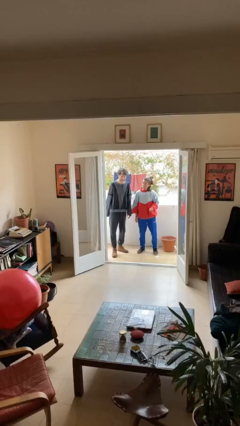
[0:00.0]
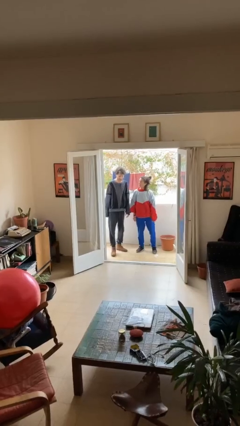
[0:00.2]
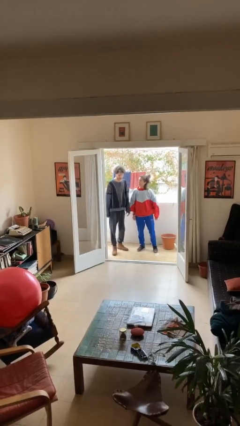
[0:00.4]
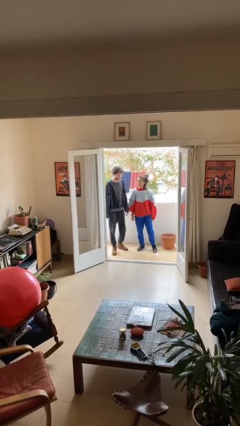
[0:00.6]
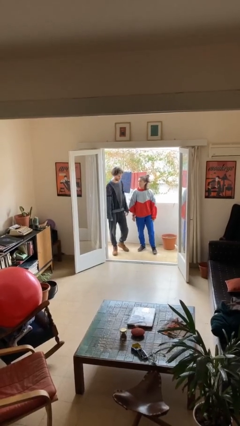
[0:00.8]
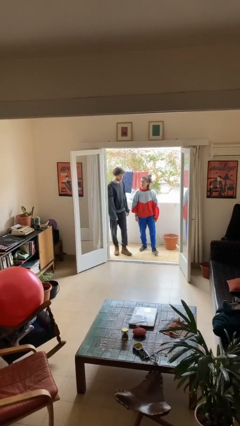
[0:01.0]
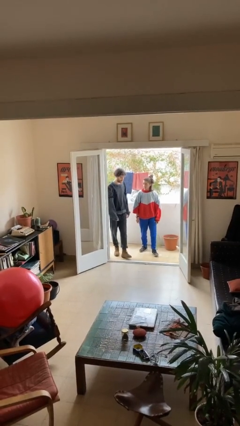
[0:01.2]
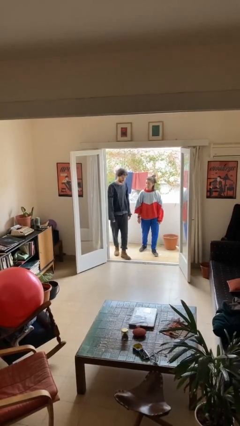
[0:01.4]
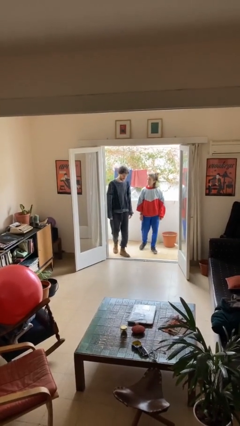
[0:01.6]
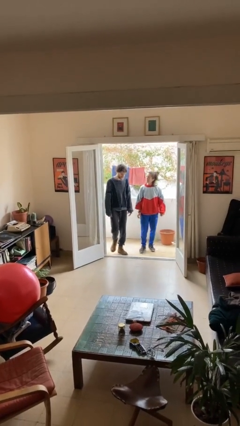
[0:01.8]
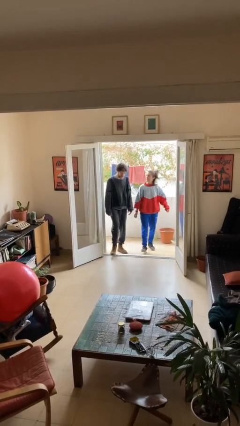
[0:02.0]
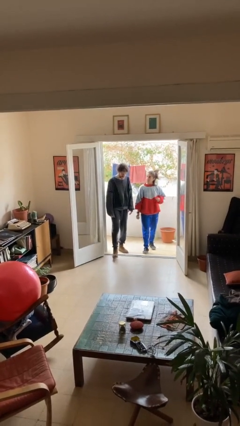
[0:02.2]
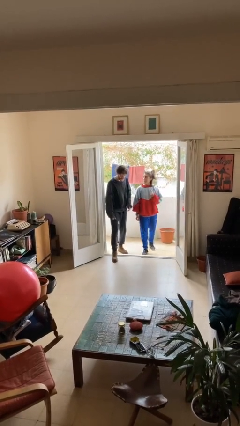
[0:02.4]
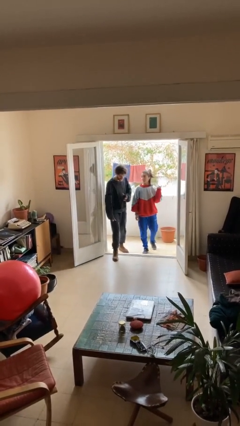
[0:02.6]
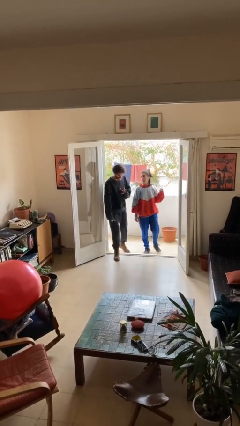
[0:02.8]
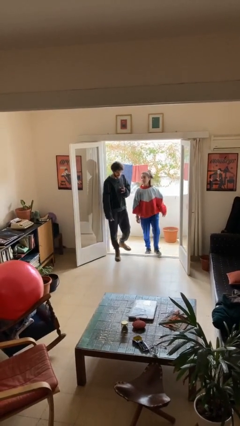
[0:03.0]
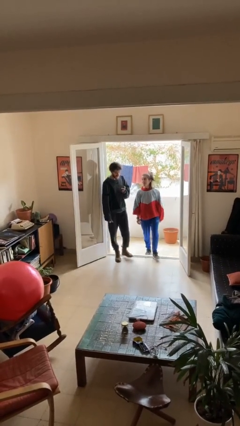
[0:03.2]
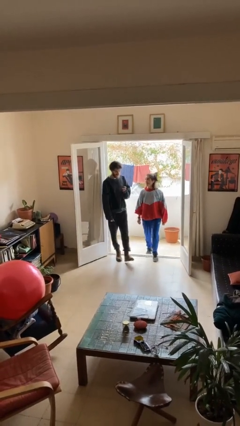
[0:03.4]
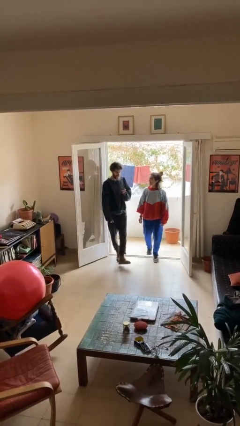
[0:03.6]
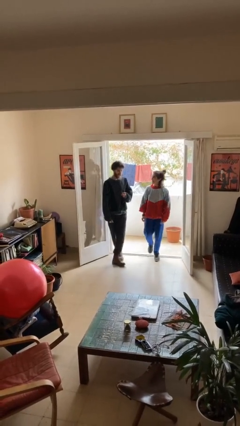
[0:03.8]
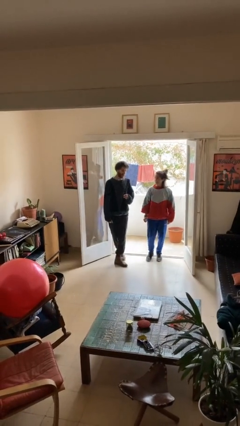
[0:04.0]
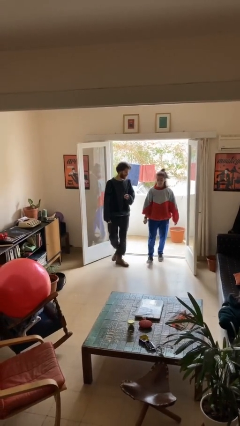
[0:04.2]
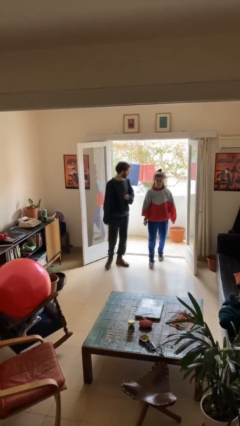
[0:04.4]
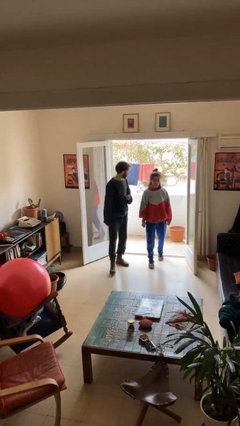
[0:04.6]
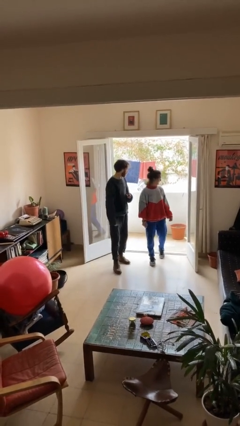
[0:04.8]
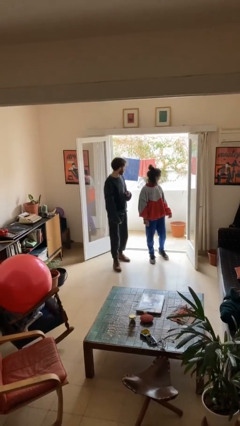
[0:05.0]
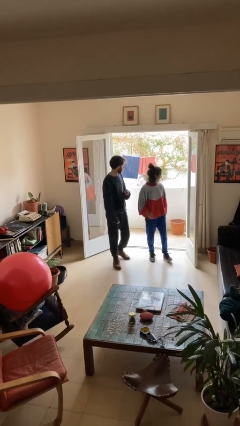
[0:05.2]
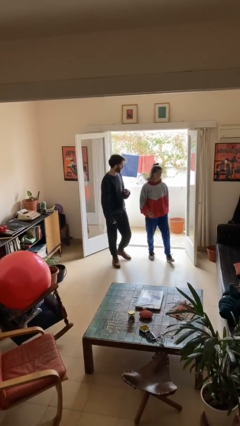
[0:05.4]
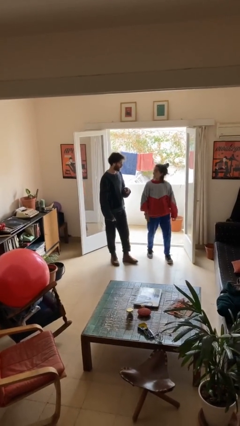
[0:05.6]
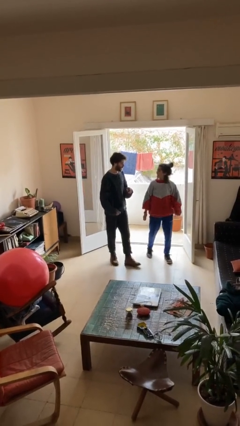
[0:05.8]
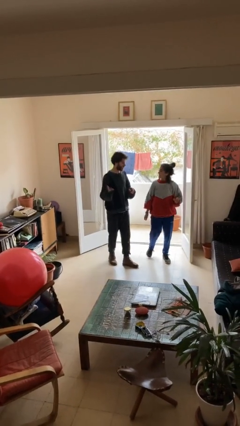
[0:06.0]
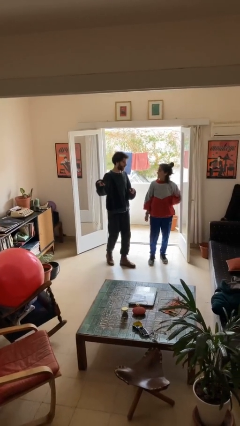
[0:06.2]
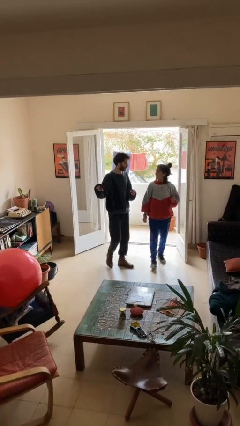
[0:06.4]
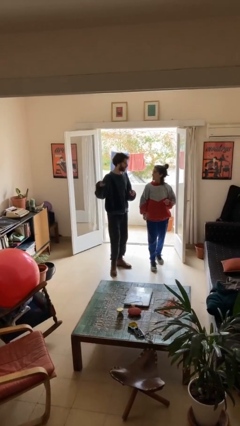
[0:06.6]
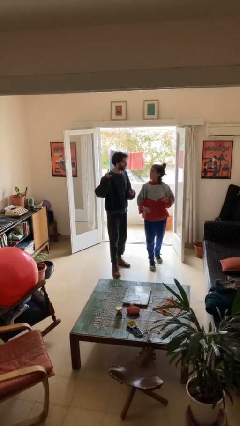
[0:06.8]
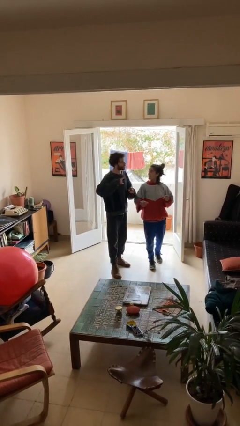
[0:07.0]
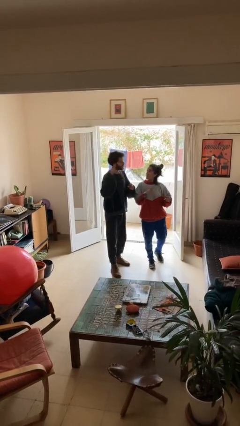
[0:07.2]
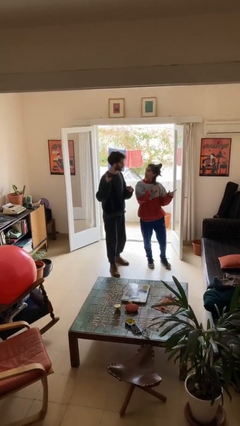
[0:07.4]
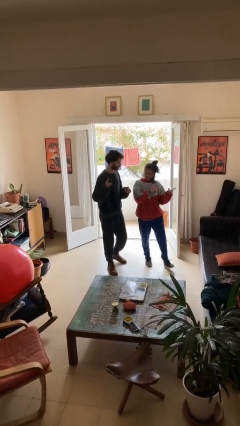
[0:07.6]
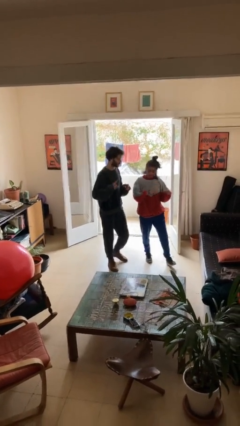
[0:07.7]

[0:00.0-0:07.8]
person talks to person

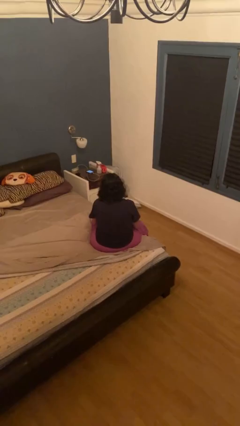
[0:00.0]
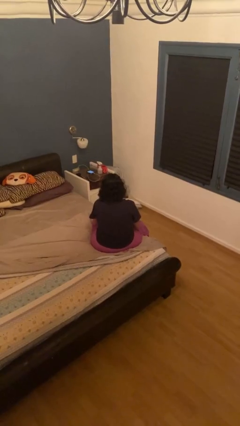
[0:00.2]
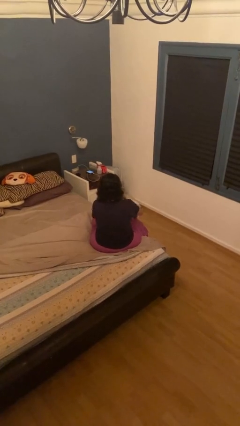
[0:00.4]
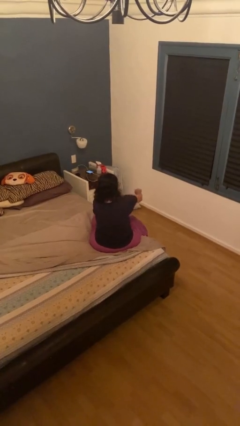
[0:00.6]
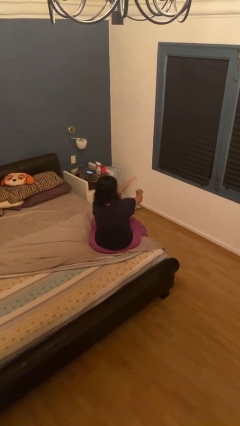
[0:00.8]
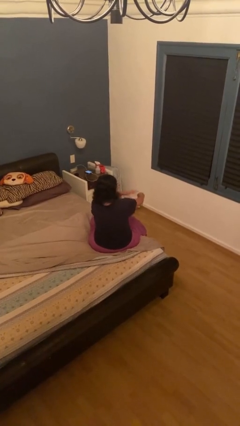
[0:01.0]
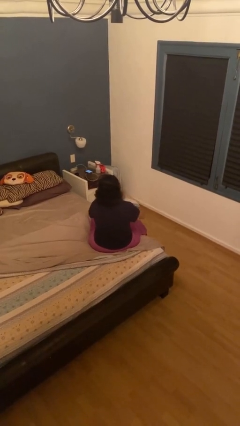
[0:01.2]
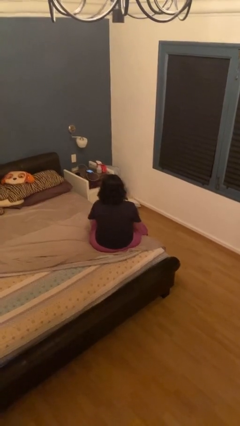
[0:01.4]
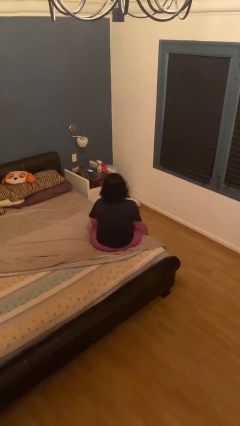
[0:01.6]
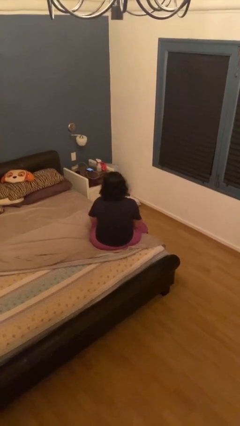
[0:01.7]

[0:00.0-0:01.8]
person swats bug

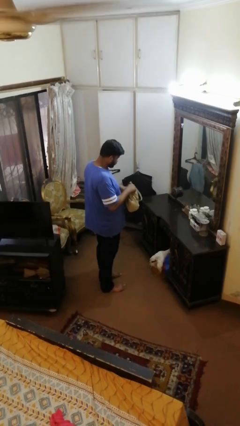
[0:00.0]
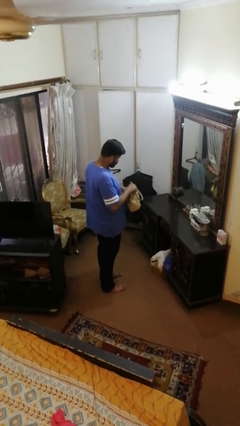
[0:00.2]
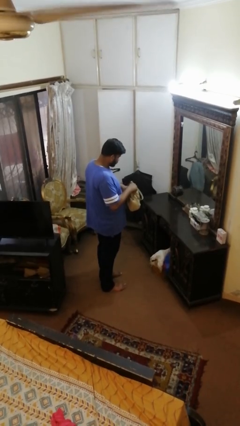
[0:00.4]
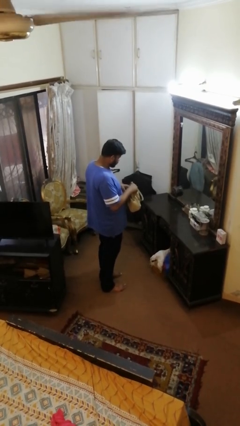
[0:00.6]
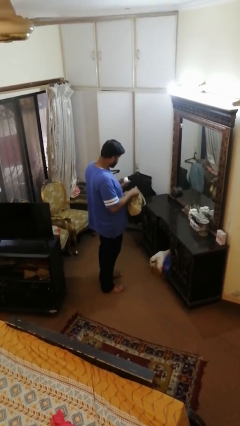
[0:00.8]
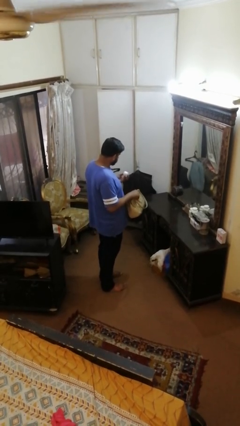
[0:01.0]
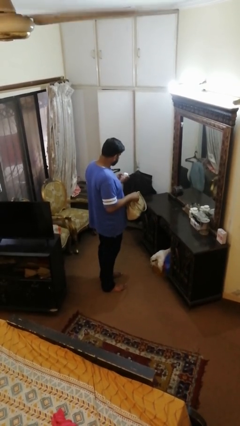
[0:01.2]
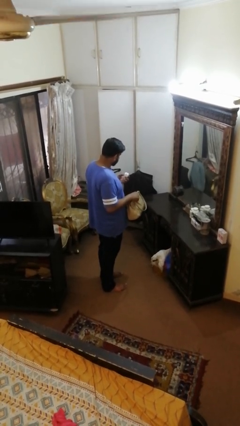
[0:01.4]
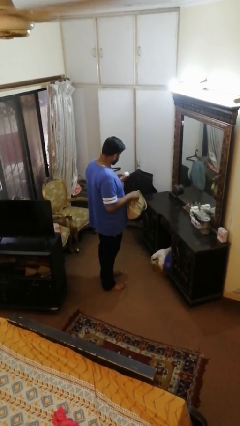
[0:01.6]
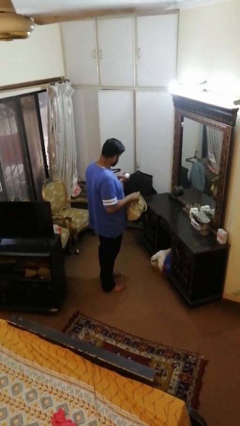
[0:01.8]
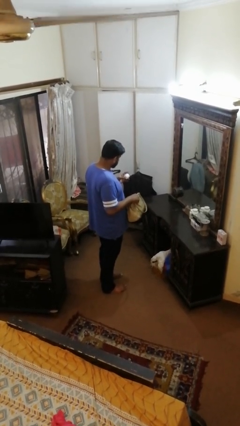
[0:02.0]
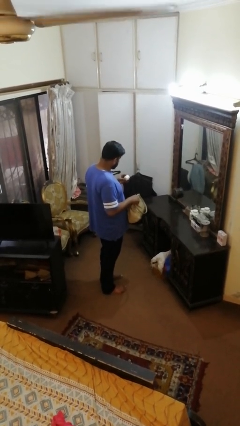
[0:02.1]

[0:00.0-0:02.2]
person takes object from purse

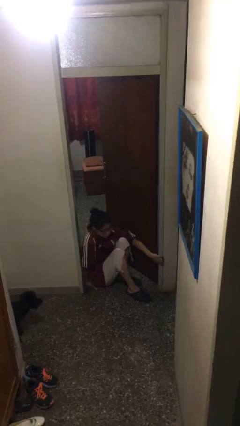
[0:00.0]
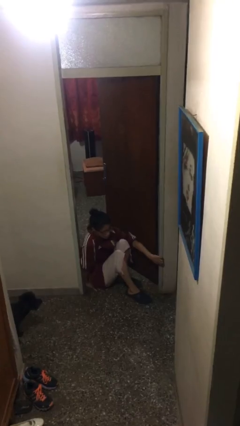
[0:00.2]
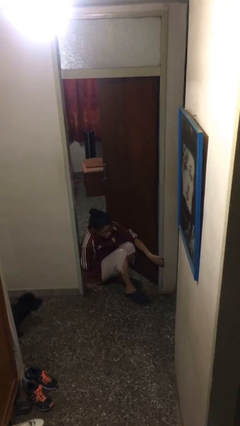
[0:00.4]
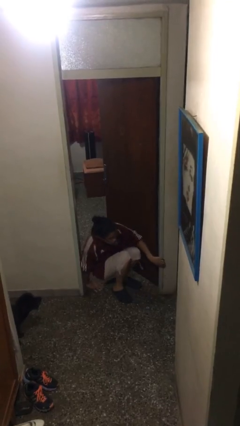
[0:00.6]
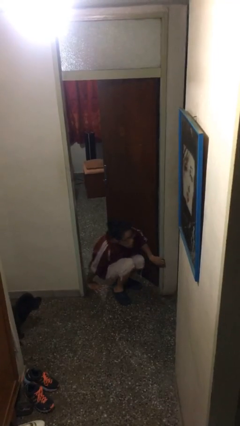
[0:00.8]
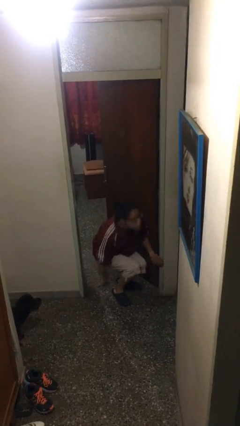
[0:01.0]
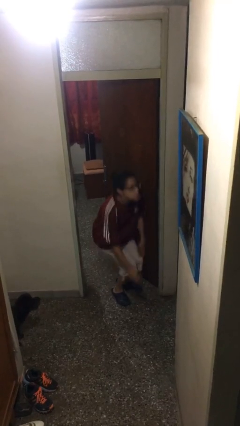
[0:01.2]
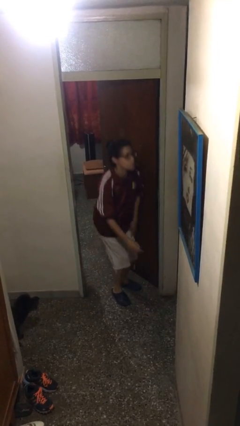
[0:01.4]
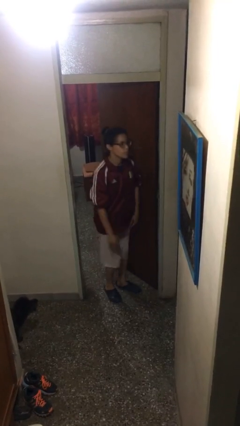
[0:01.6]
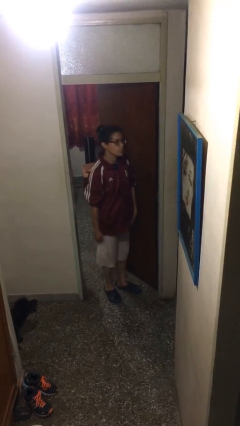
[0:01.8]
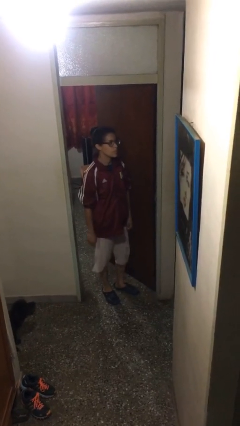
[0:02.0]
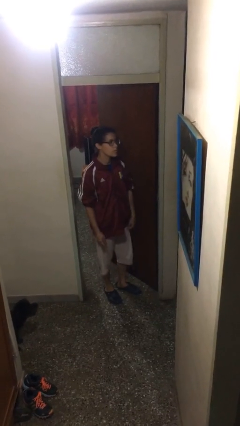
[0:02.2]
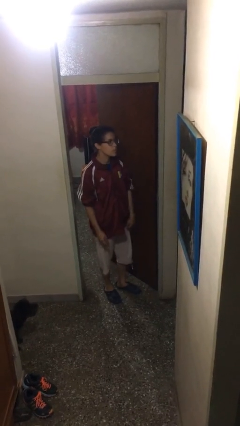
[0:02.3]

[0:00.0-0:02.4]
person stands up

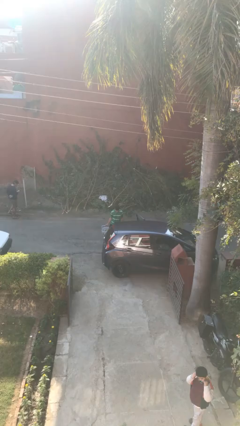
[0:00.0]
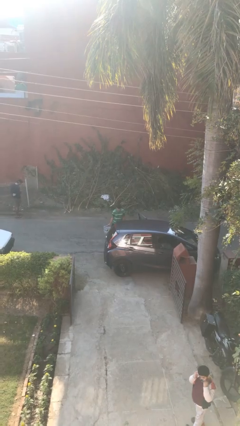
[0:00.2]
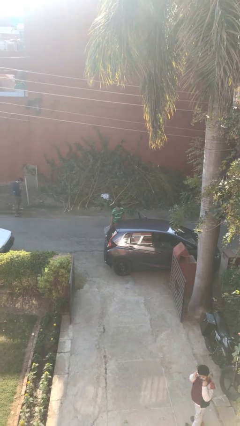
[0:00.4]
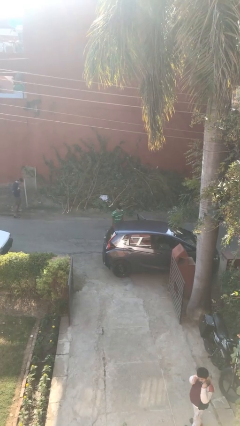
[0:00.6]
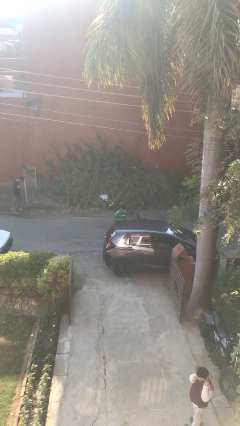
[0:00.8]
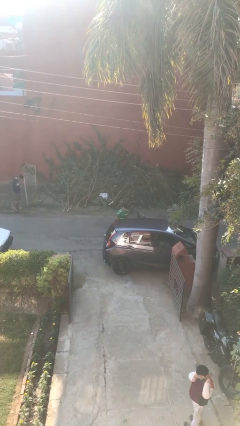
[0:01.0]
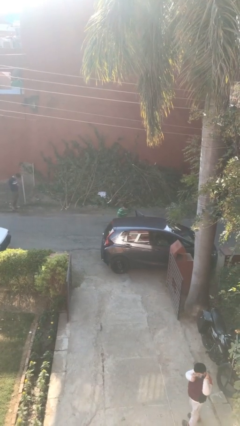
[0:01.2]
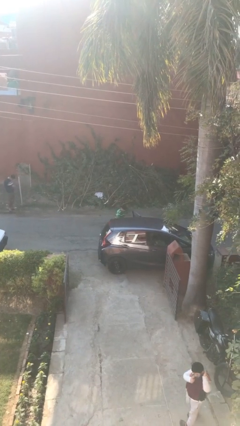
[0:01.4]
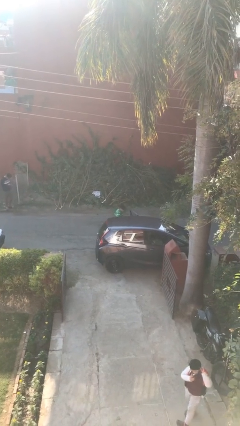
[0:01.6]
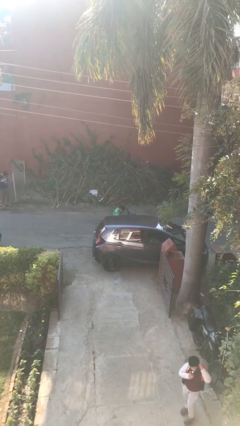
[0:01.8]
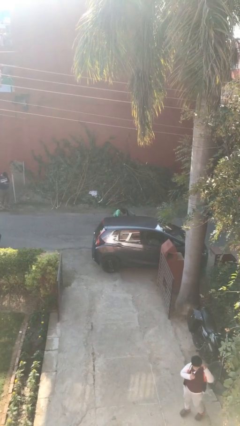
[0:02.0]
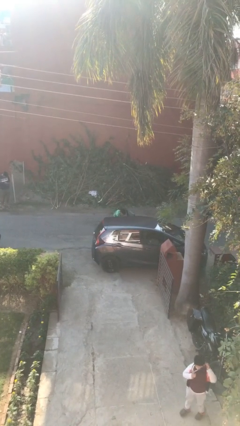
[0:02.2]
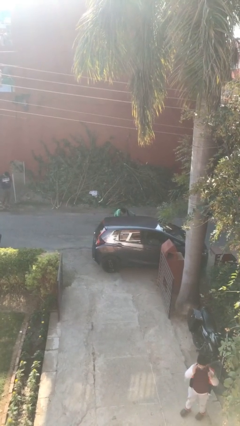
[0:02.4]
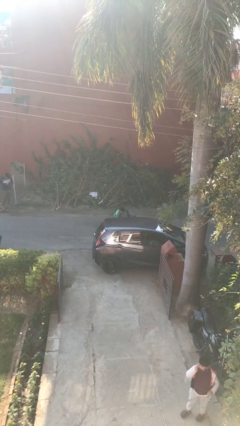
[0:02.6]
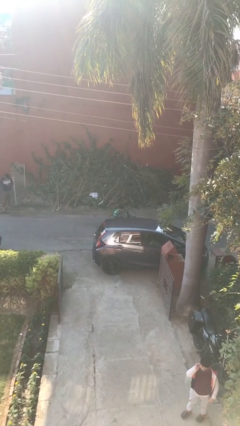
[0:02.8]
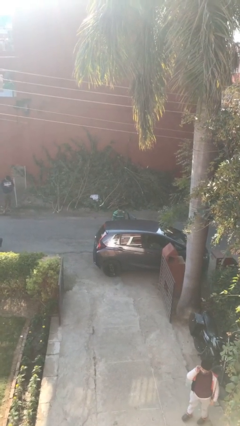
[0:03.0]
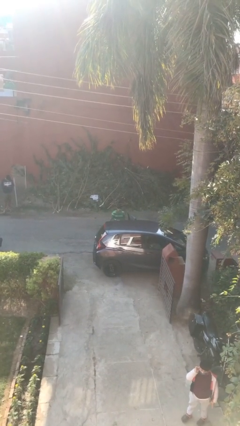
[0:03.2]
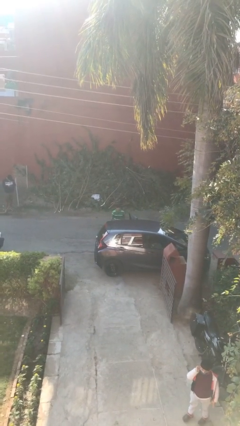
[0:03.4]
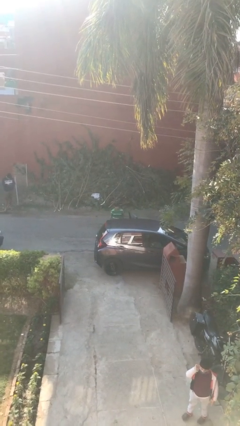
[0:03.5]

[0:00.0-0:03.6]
person loads car

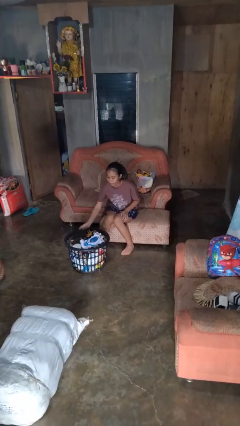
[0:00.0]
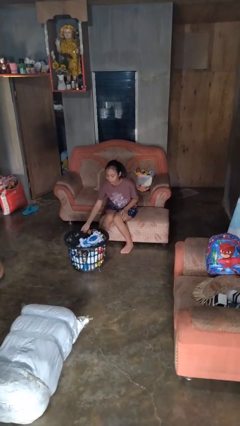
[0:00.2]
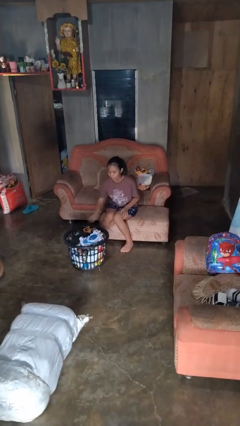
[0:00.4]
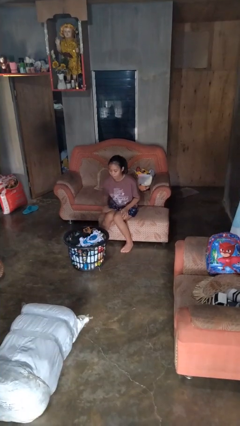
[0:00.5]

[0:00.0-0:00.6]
person puts object into basket
